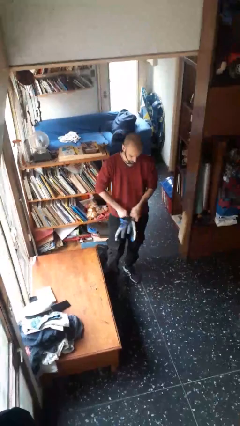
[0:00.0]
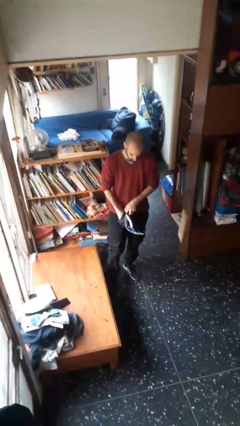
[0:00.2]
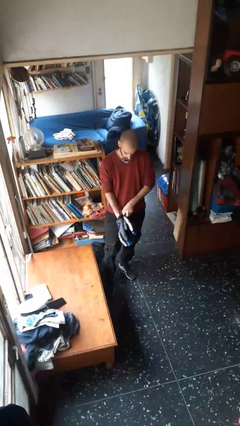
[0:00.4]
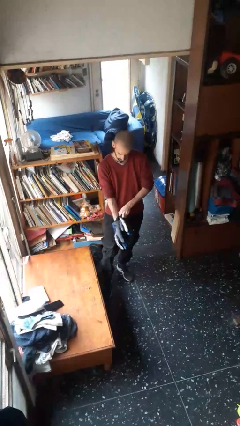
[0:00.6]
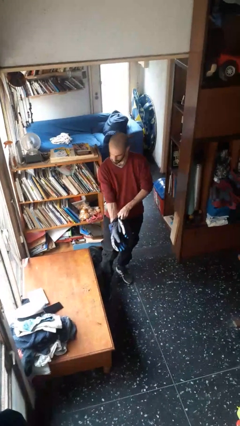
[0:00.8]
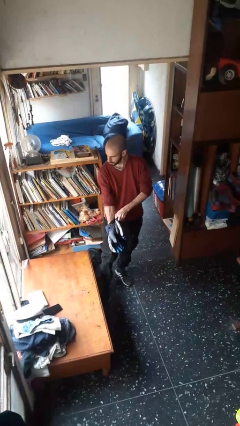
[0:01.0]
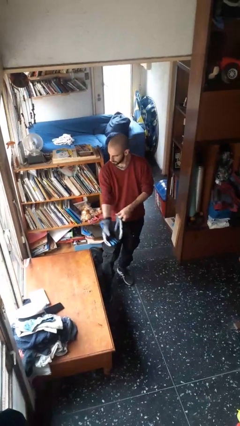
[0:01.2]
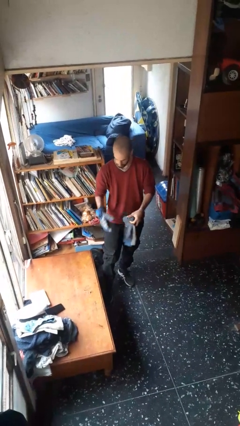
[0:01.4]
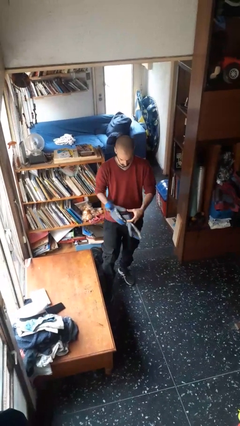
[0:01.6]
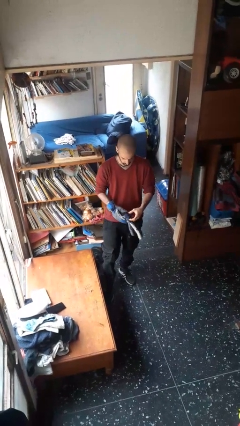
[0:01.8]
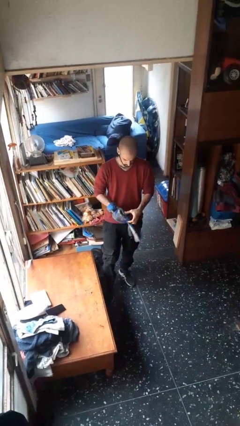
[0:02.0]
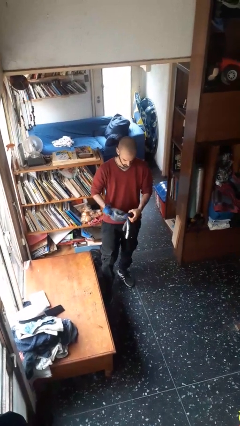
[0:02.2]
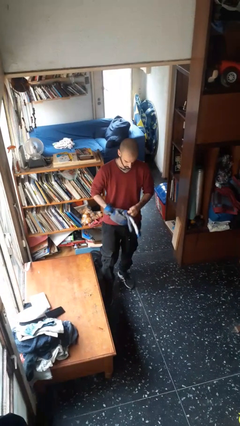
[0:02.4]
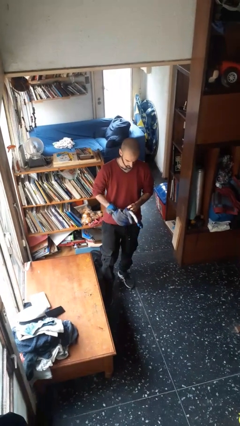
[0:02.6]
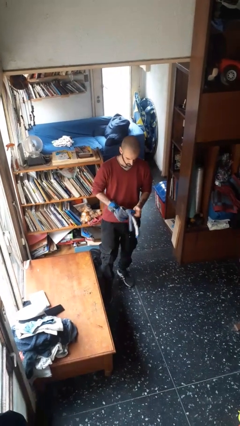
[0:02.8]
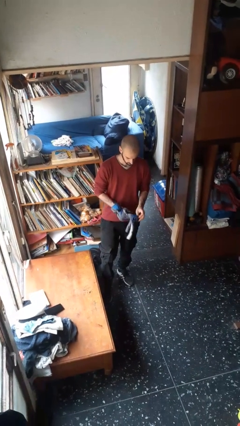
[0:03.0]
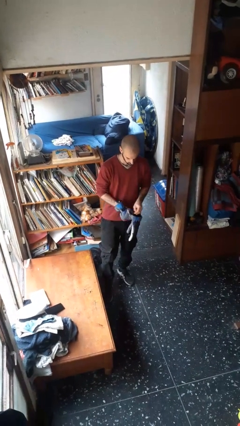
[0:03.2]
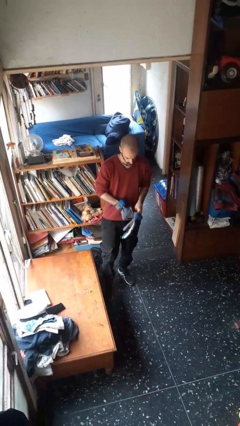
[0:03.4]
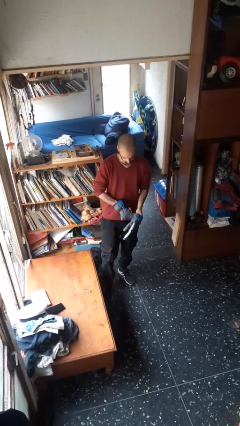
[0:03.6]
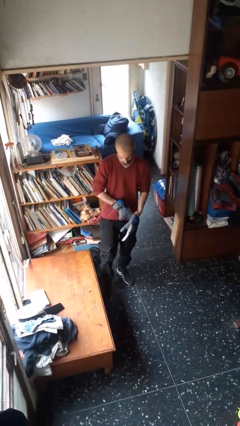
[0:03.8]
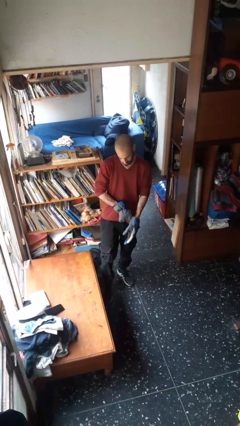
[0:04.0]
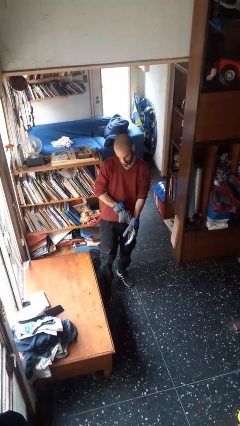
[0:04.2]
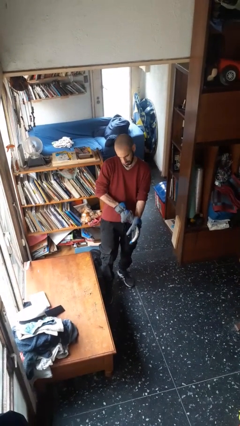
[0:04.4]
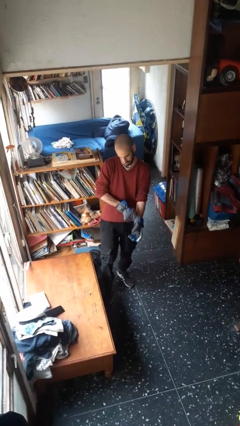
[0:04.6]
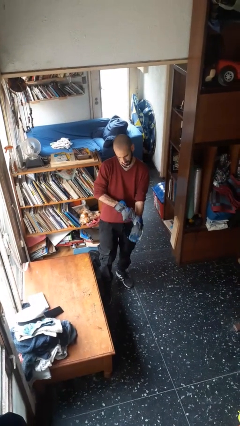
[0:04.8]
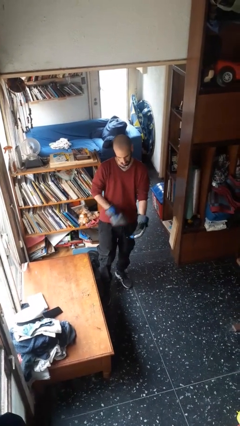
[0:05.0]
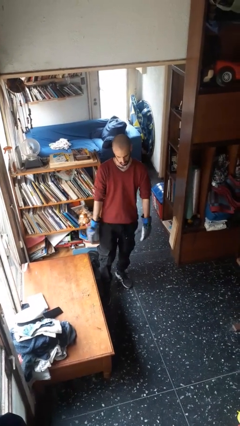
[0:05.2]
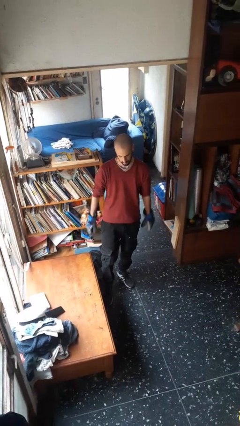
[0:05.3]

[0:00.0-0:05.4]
person puts on gloves

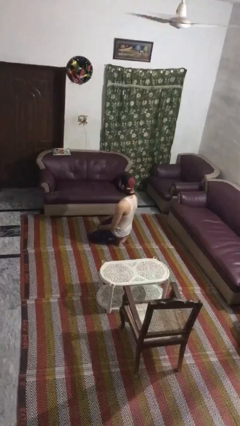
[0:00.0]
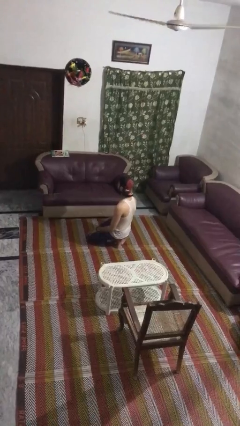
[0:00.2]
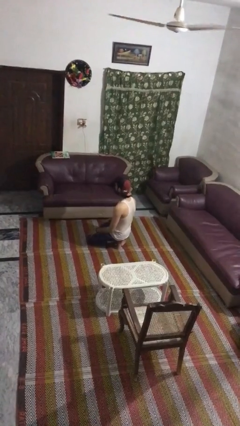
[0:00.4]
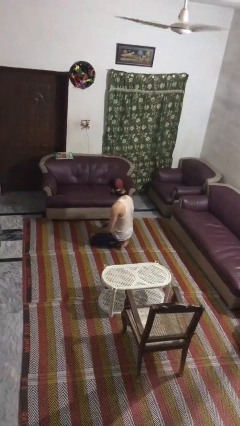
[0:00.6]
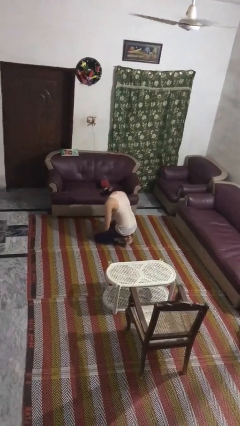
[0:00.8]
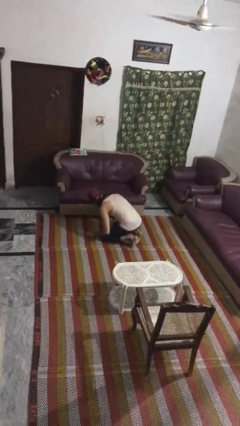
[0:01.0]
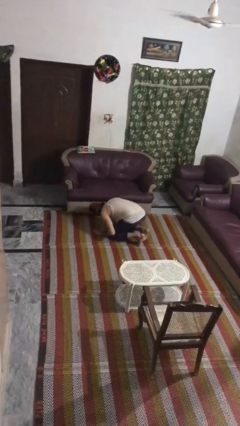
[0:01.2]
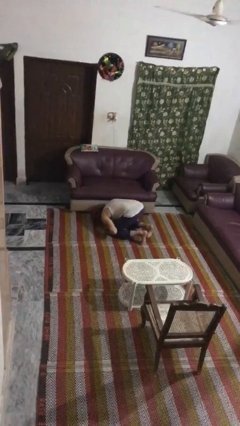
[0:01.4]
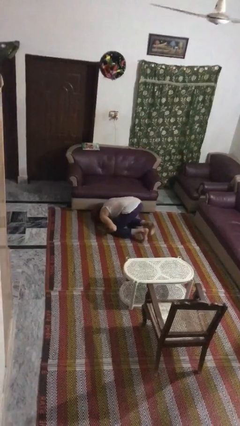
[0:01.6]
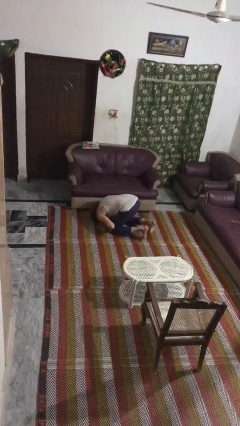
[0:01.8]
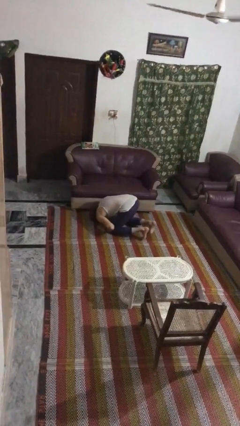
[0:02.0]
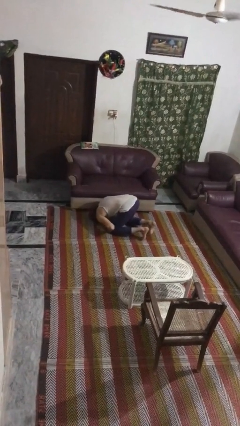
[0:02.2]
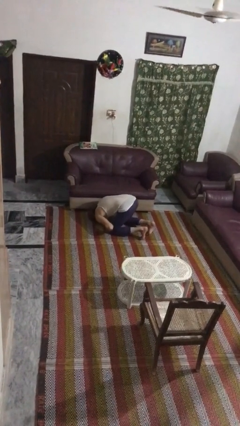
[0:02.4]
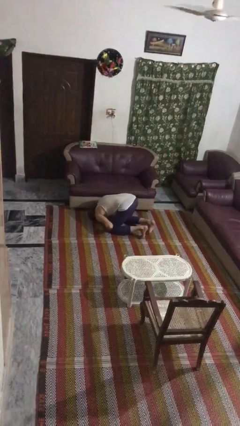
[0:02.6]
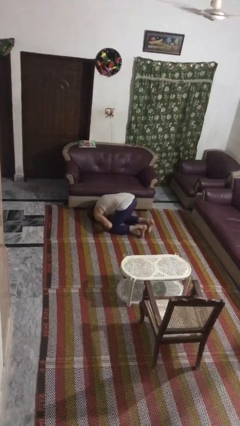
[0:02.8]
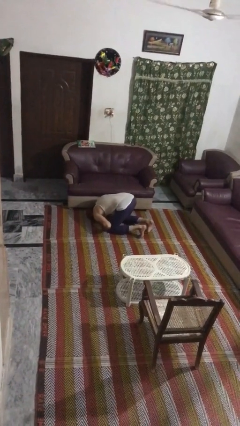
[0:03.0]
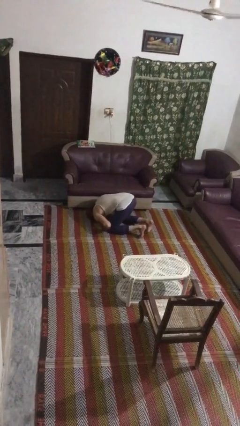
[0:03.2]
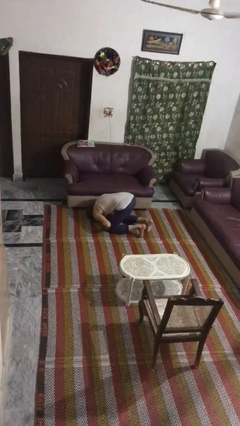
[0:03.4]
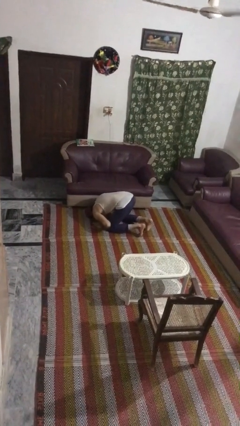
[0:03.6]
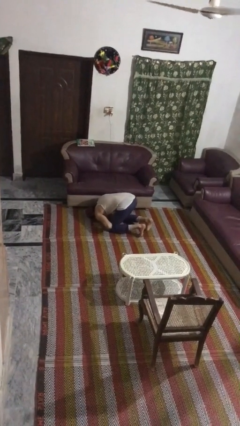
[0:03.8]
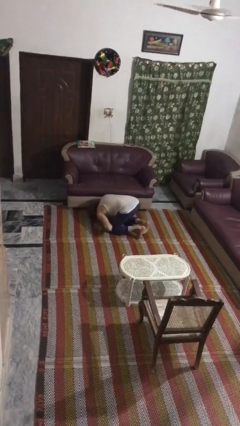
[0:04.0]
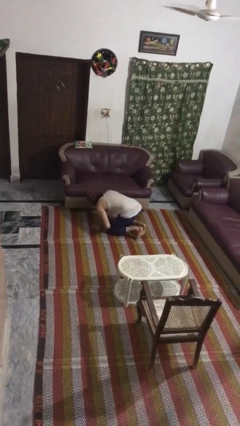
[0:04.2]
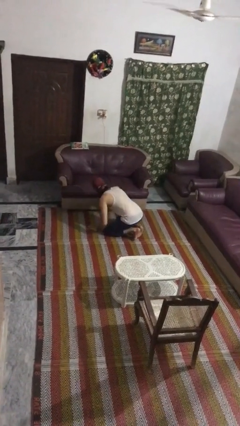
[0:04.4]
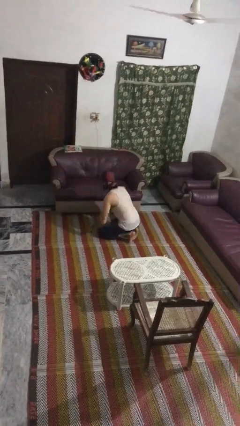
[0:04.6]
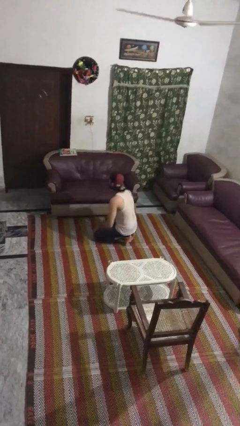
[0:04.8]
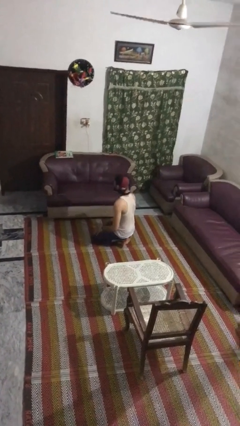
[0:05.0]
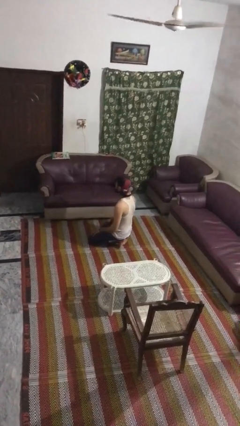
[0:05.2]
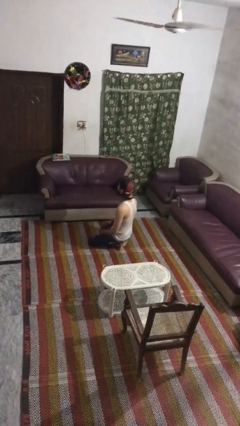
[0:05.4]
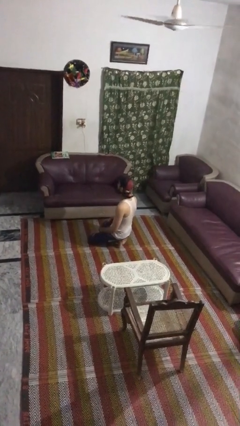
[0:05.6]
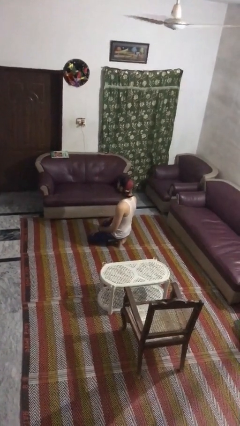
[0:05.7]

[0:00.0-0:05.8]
person searches under couch

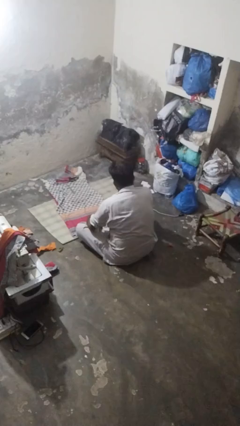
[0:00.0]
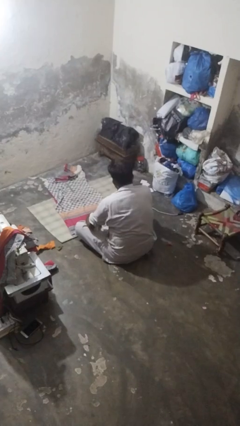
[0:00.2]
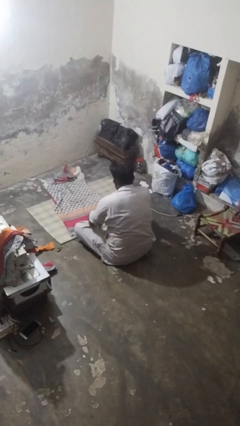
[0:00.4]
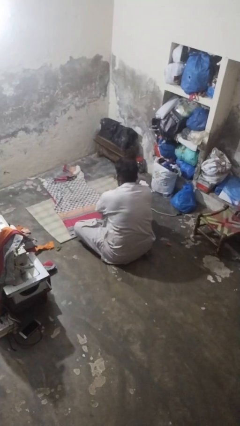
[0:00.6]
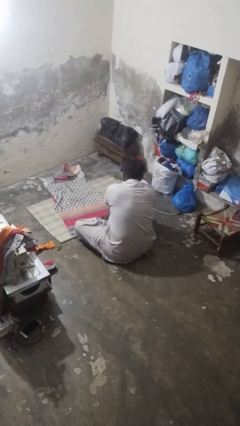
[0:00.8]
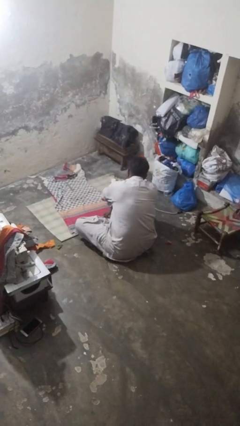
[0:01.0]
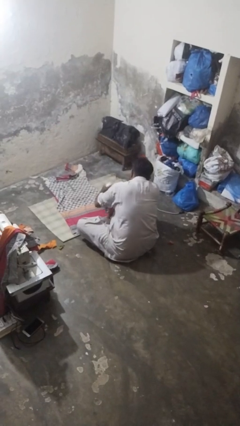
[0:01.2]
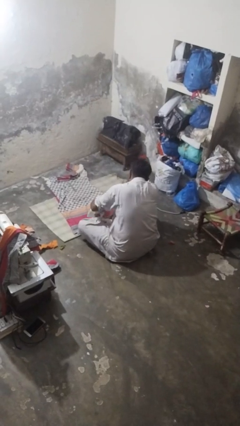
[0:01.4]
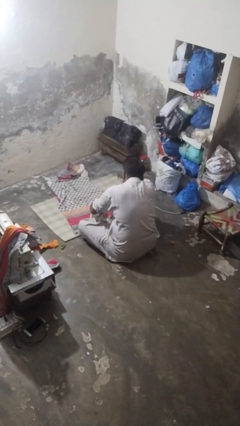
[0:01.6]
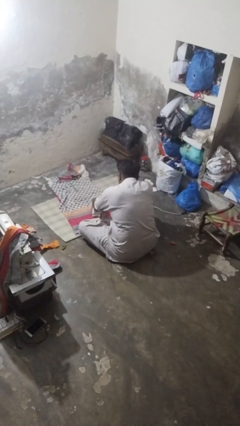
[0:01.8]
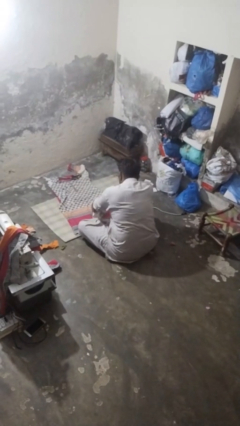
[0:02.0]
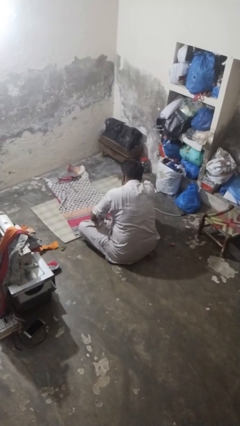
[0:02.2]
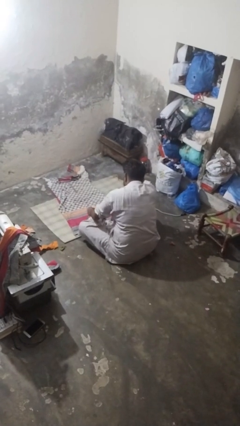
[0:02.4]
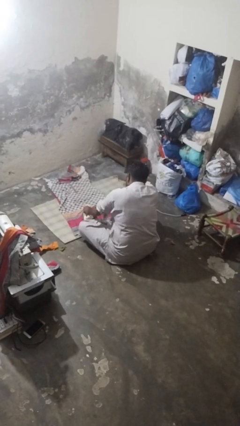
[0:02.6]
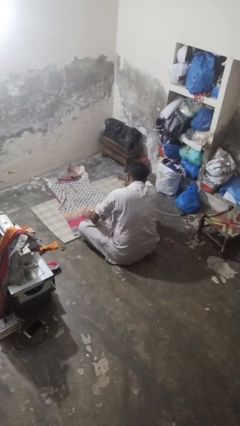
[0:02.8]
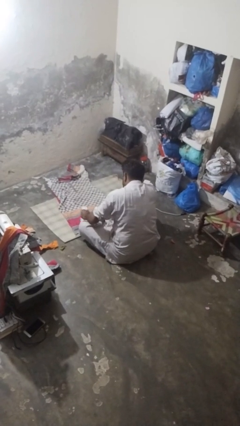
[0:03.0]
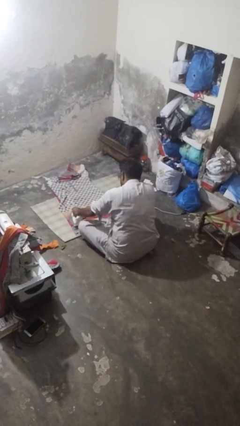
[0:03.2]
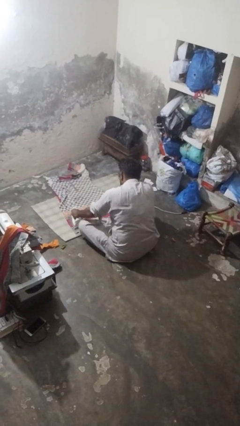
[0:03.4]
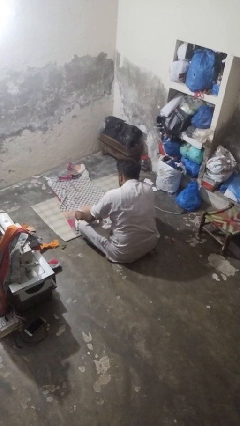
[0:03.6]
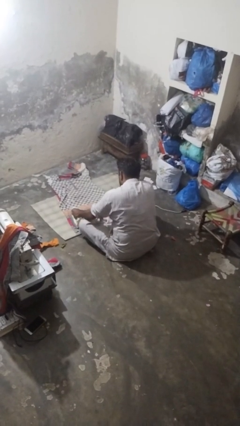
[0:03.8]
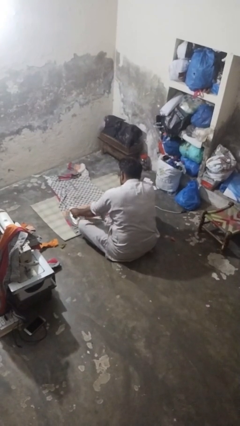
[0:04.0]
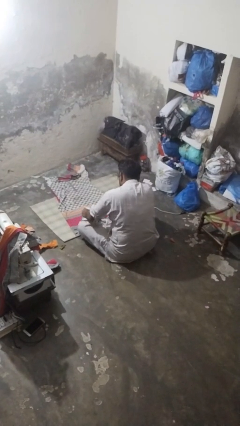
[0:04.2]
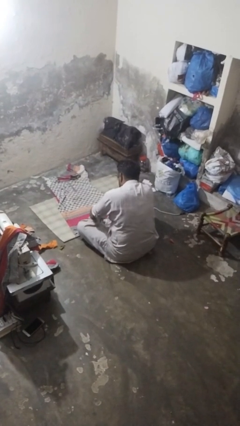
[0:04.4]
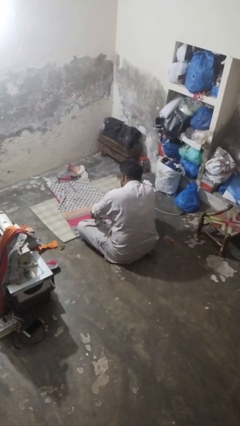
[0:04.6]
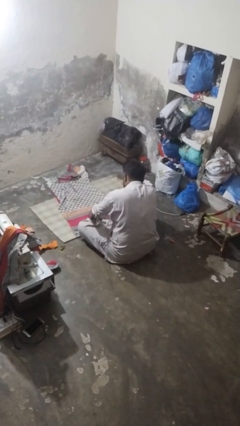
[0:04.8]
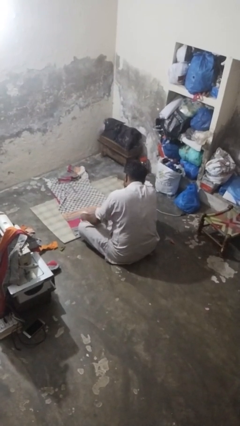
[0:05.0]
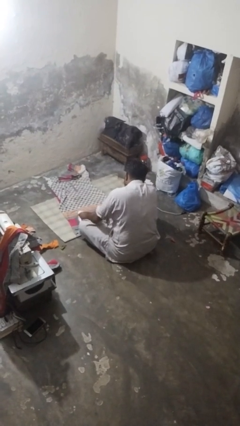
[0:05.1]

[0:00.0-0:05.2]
person irons clothes

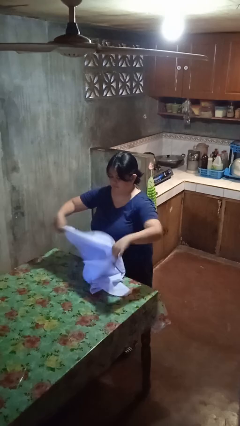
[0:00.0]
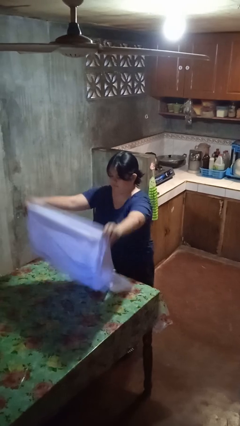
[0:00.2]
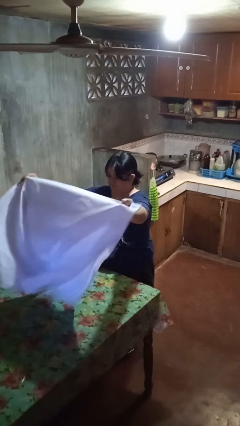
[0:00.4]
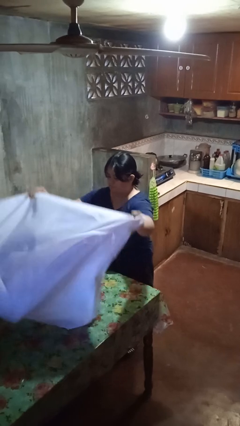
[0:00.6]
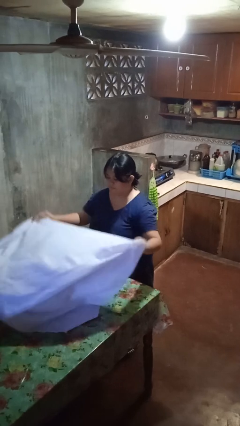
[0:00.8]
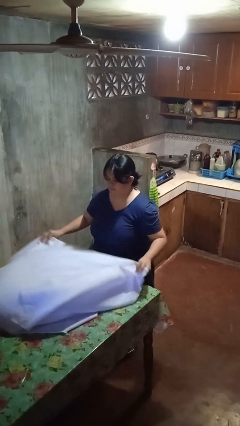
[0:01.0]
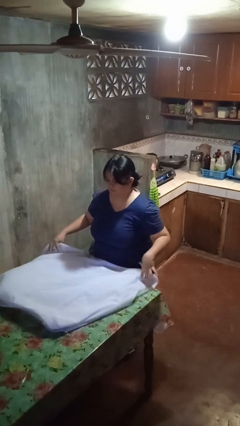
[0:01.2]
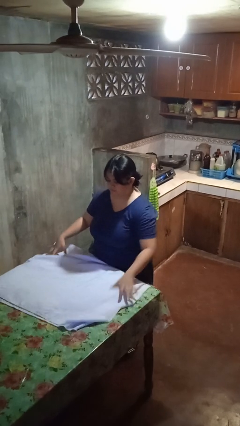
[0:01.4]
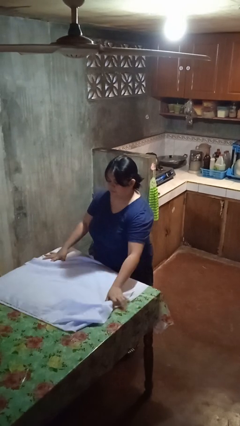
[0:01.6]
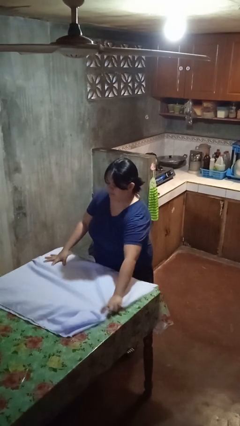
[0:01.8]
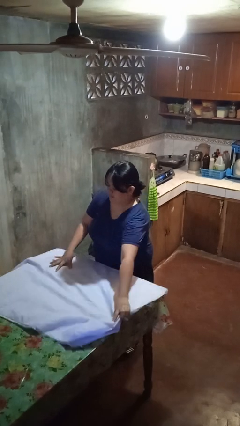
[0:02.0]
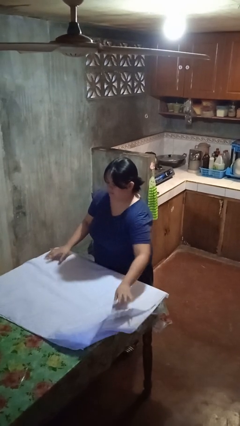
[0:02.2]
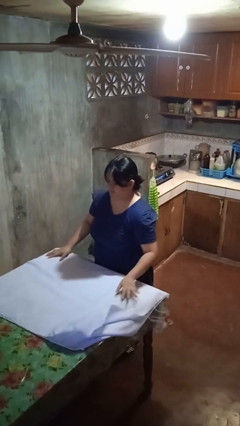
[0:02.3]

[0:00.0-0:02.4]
person spreads tablecloth
